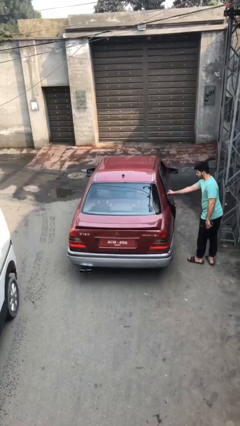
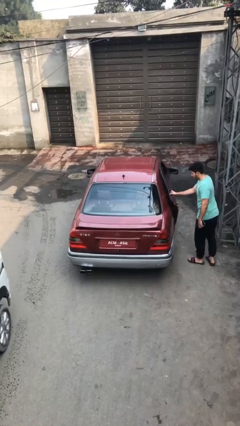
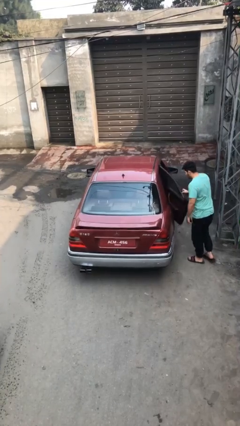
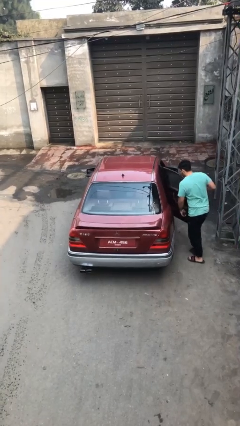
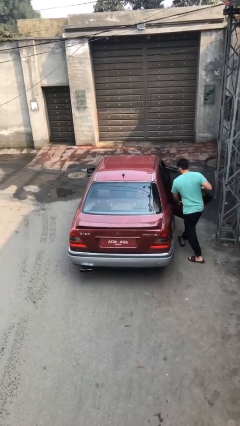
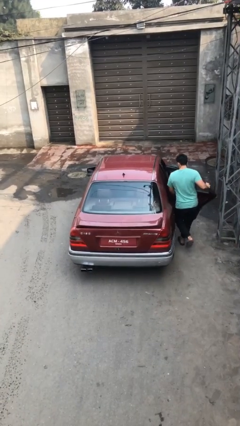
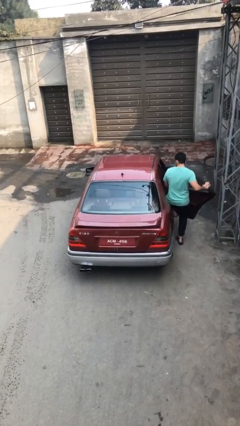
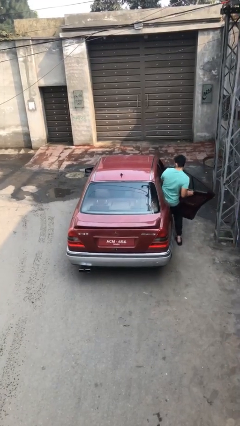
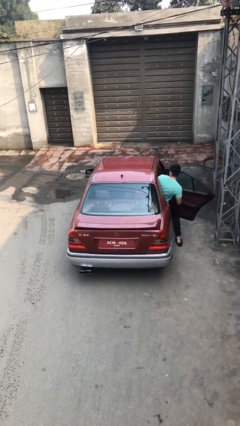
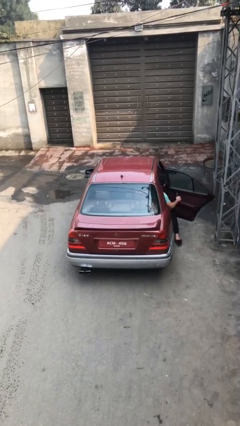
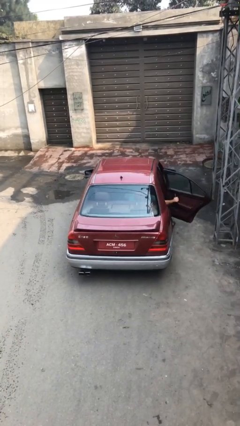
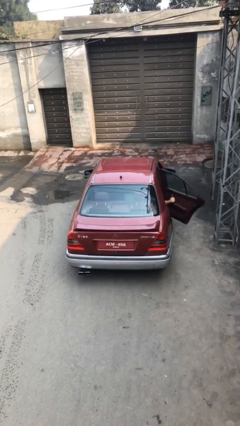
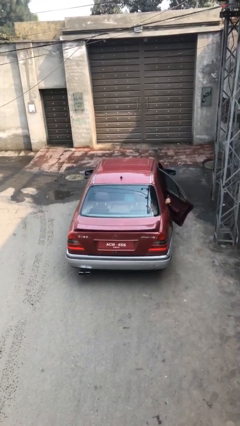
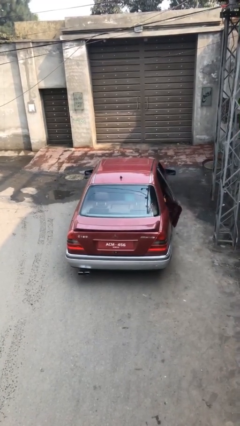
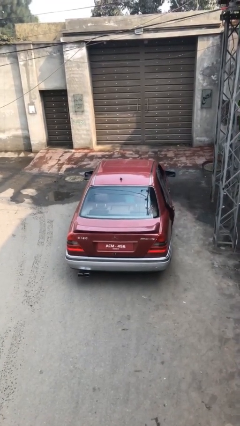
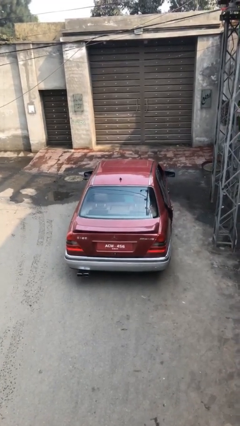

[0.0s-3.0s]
car picks up person

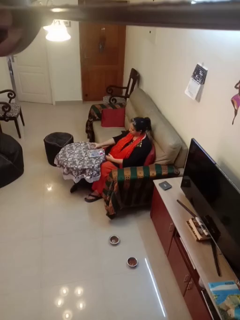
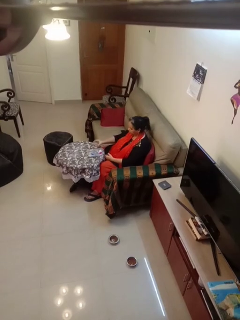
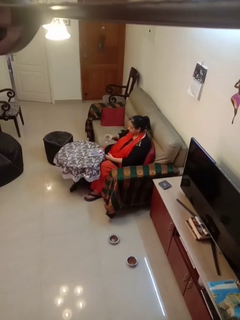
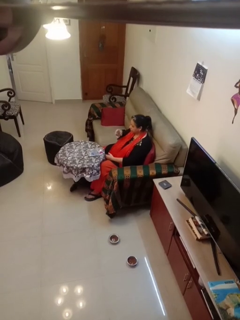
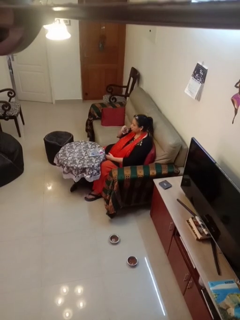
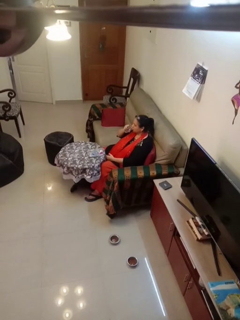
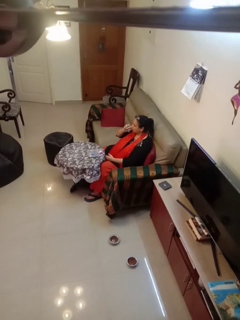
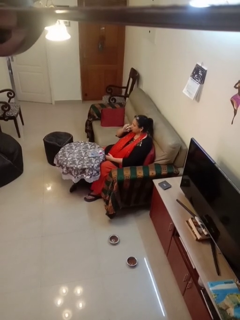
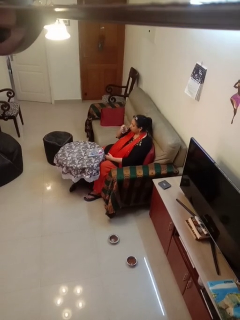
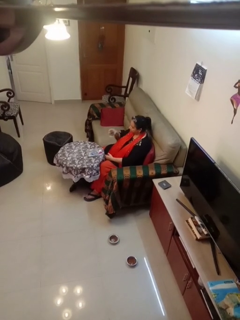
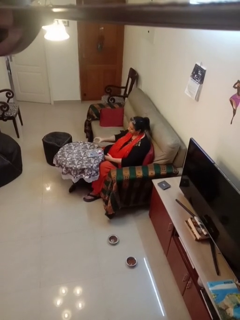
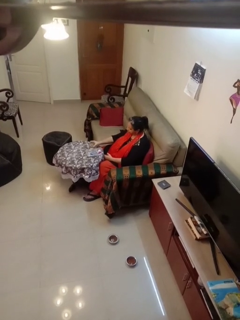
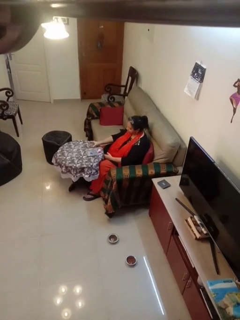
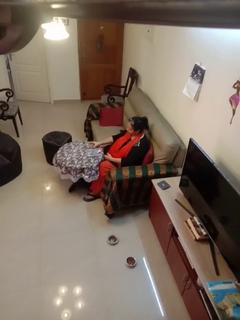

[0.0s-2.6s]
person drinks from cup

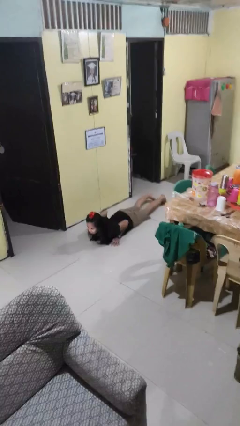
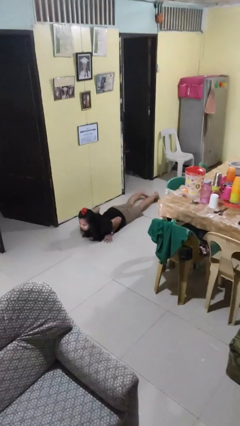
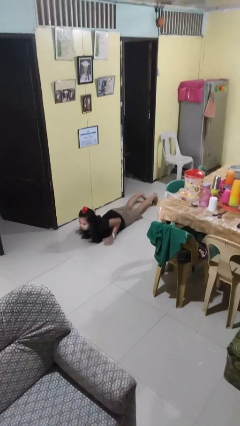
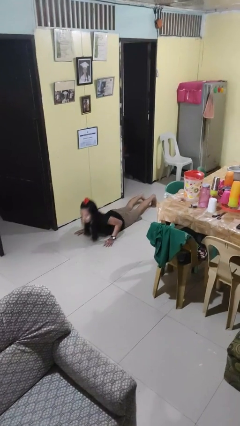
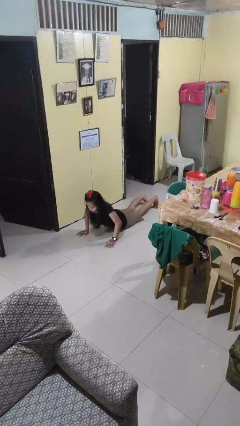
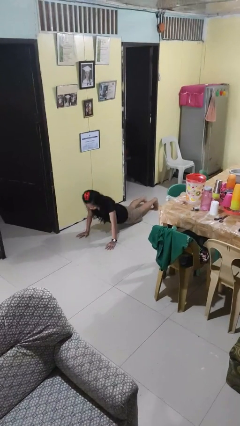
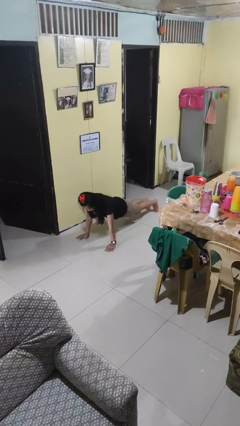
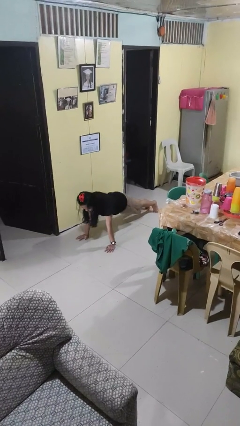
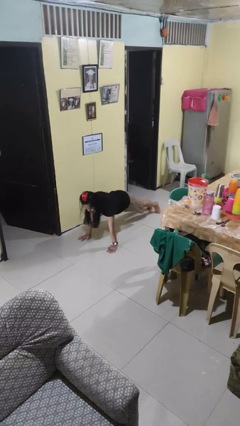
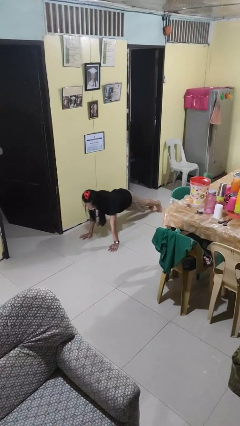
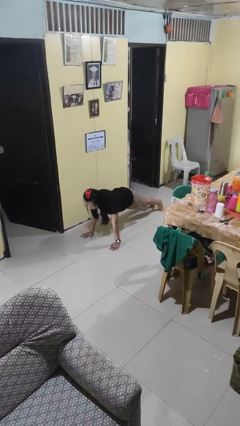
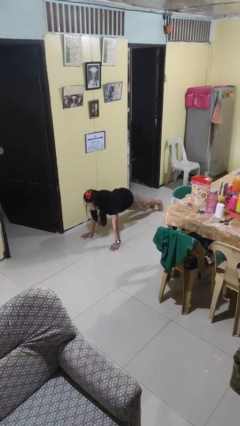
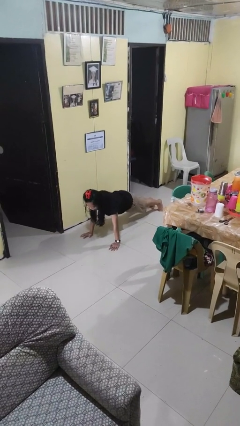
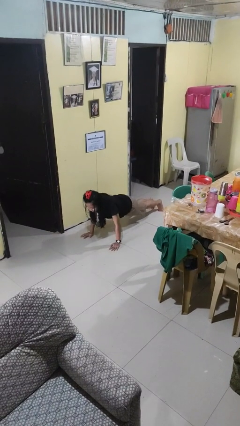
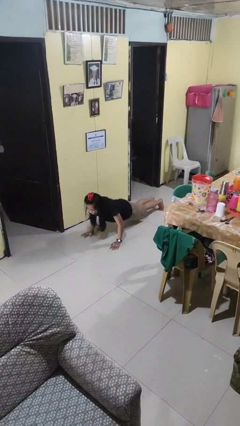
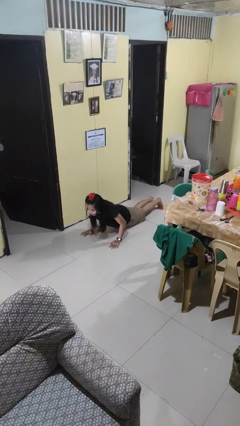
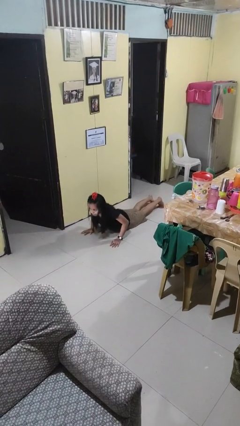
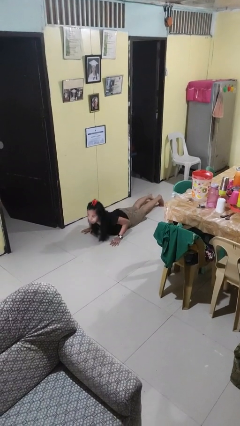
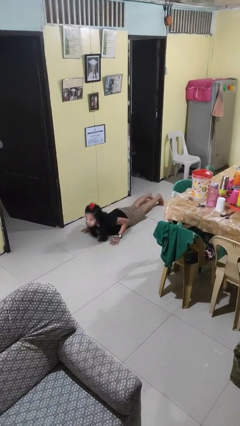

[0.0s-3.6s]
person exercises with pushup

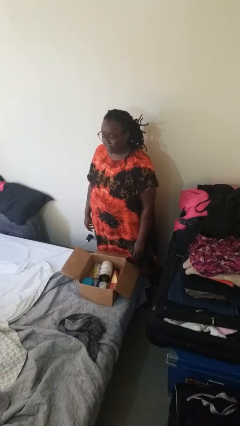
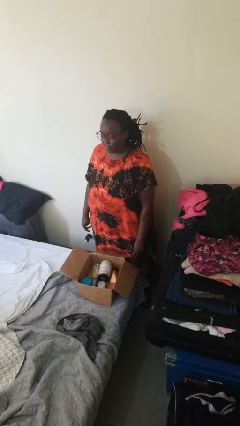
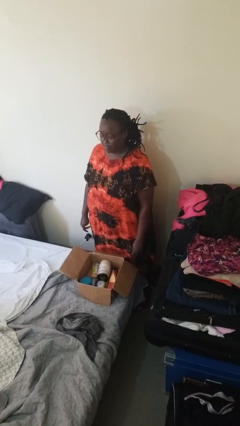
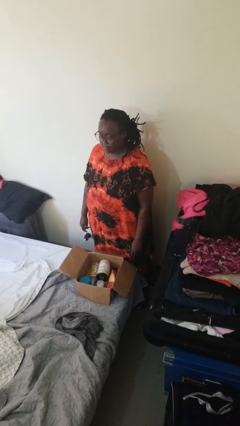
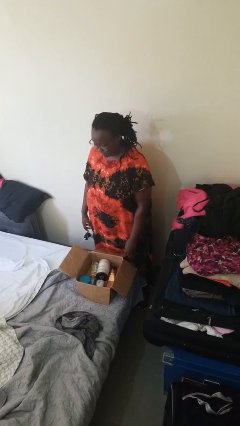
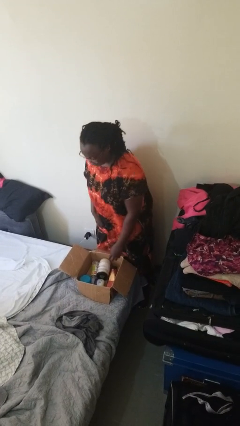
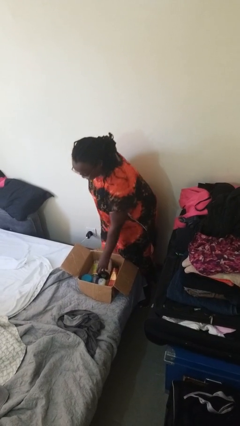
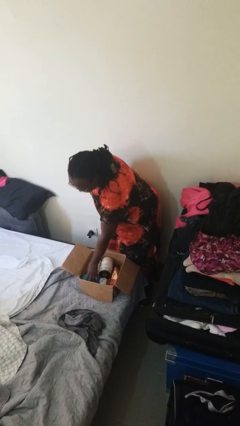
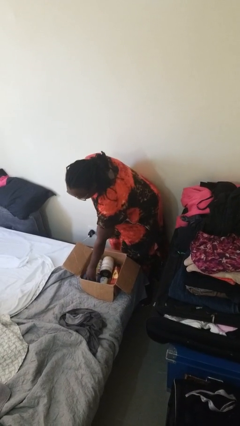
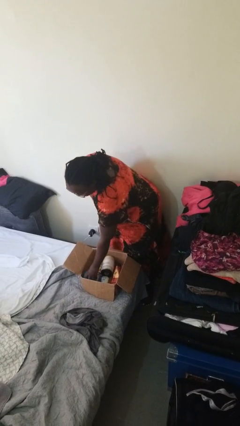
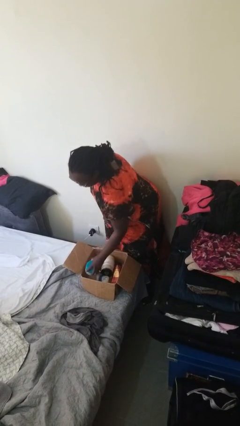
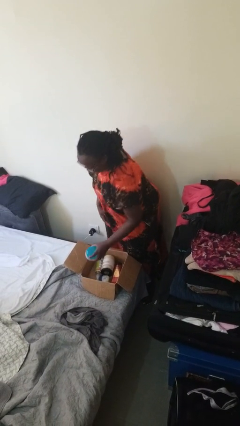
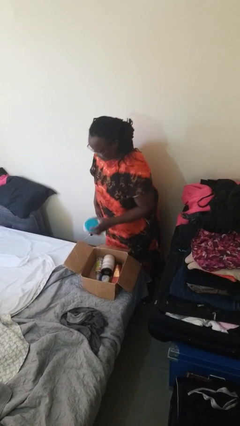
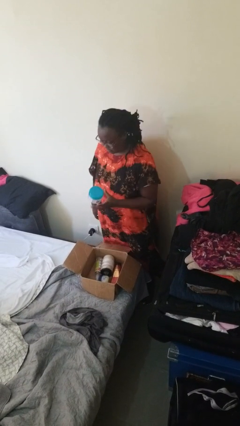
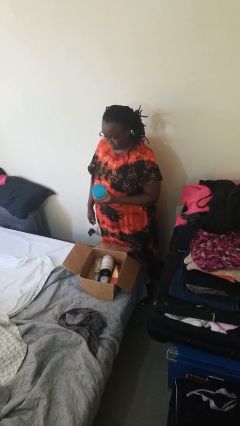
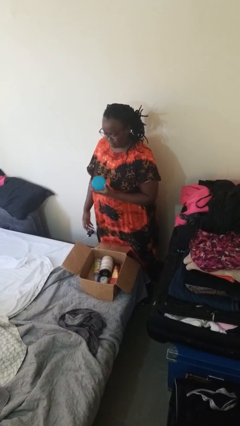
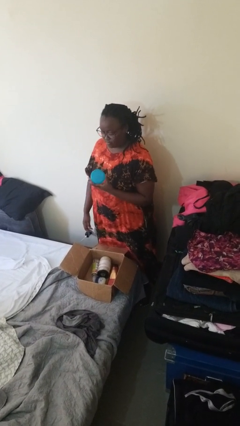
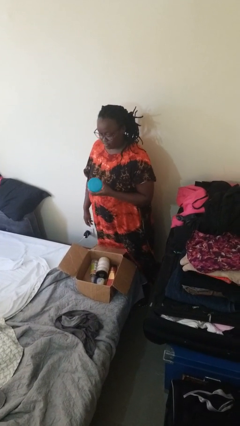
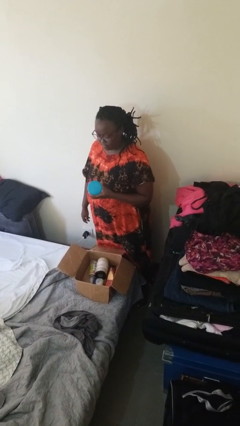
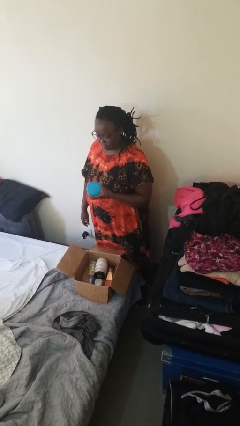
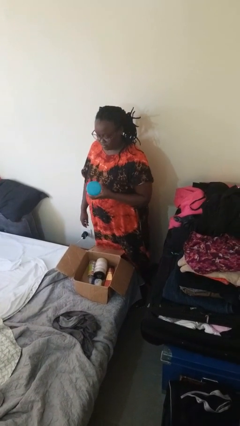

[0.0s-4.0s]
person takes object from box

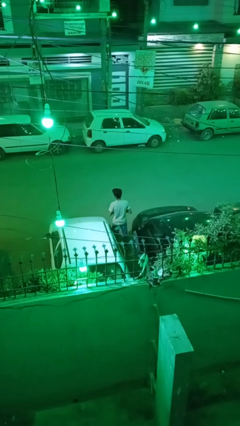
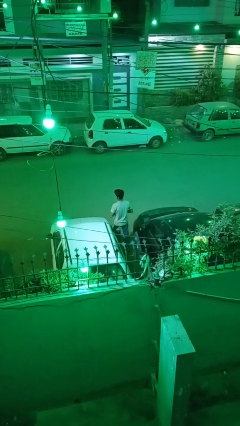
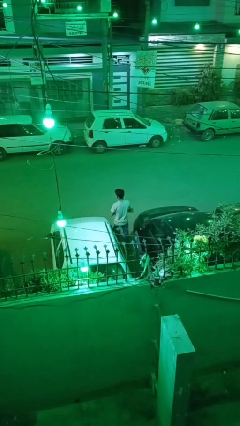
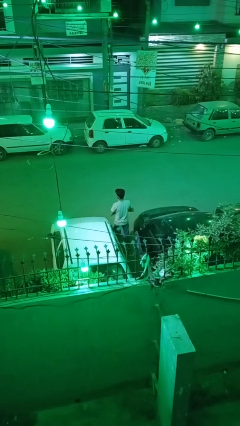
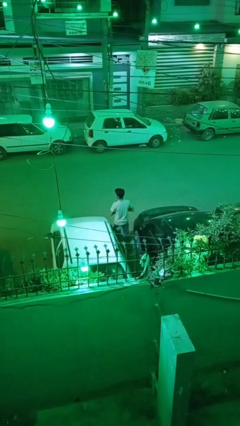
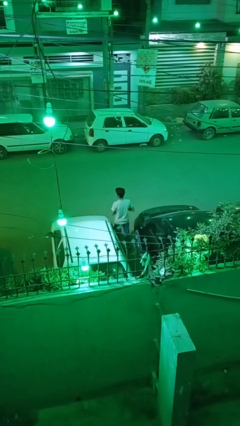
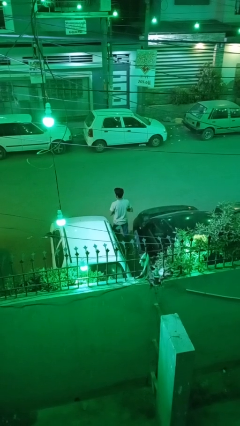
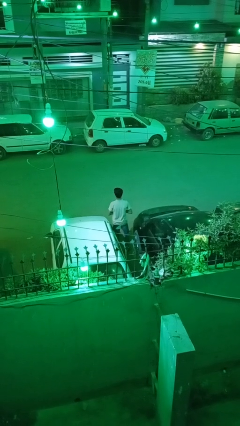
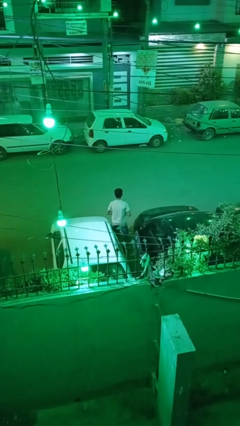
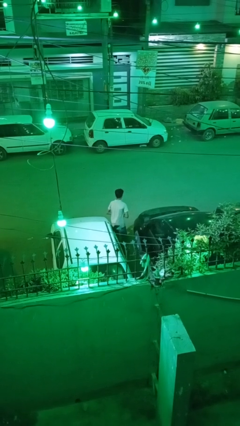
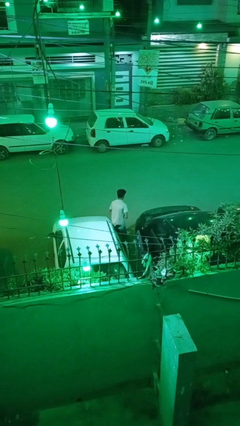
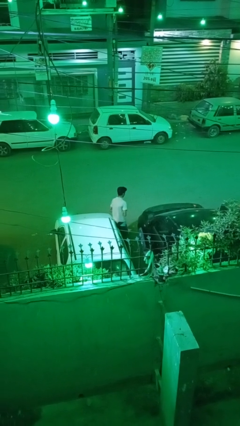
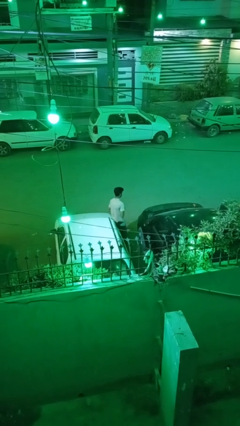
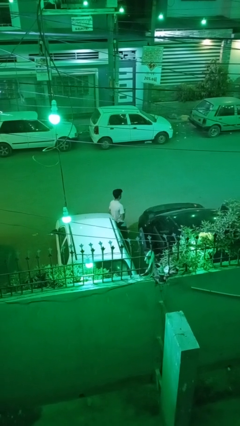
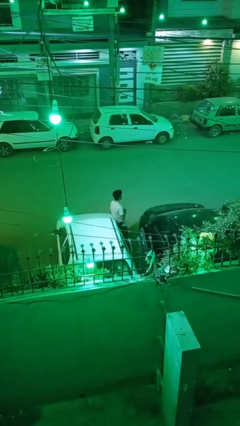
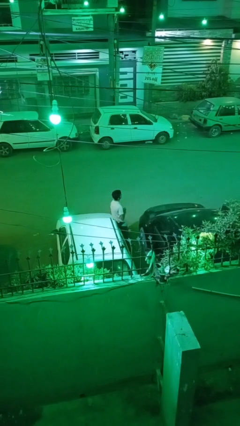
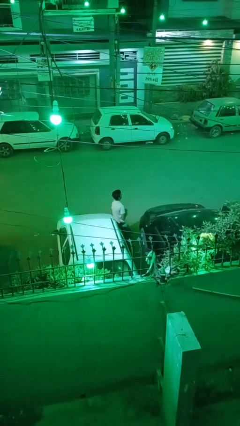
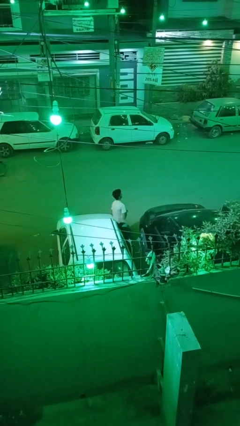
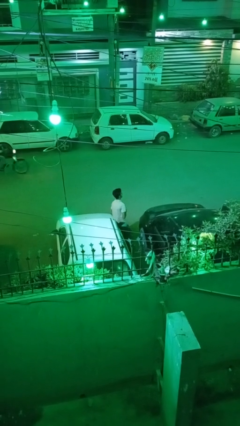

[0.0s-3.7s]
person leans against car

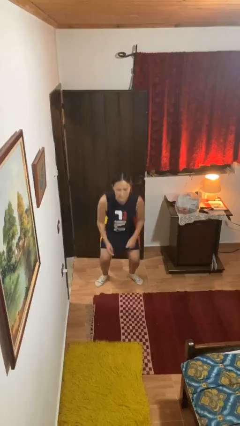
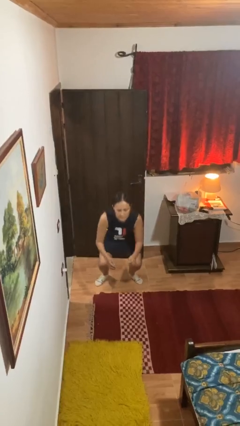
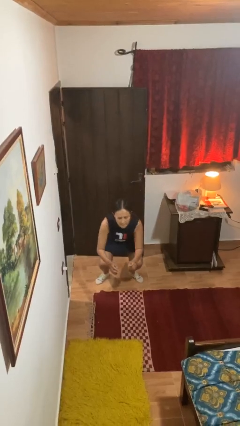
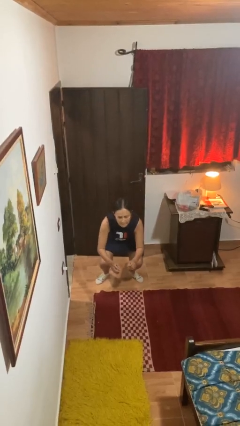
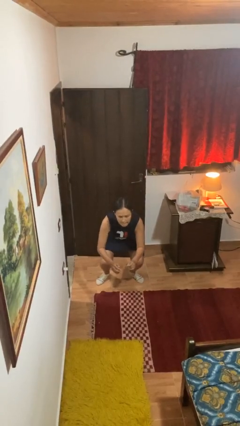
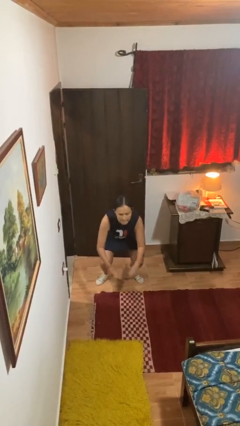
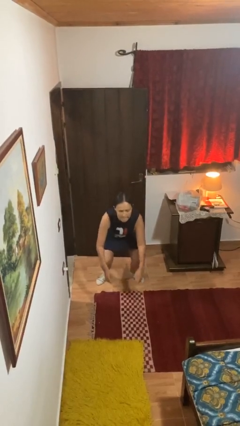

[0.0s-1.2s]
person squats

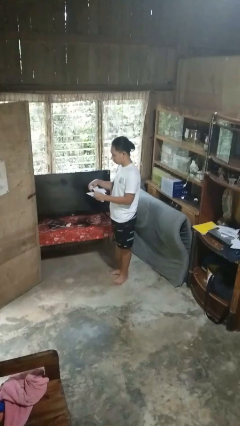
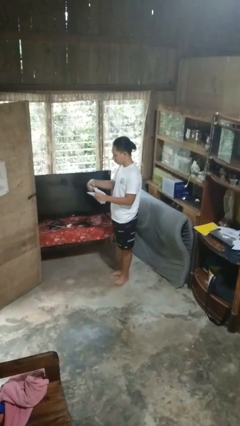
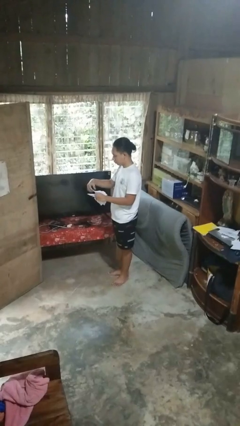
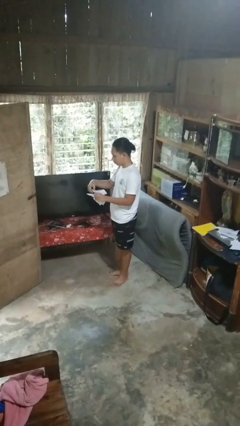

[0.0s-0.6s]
person tears paper
